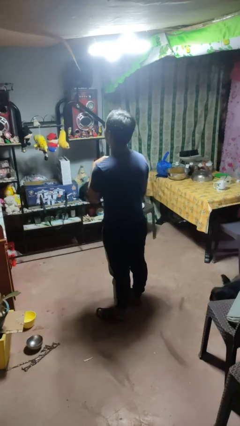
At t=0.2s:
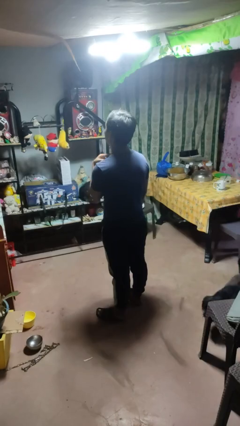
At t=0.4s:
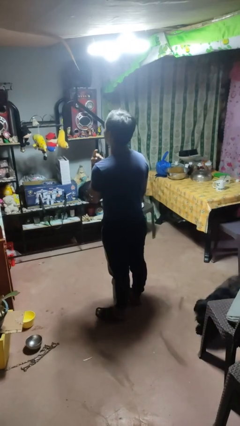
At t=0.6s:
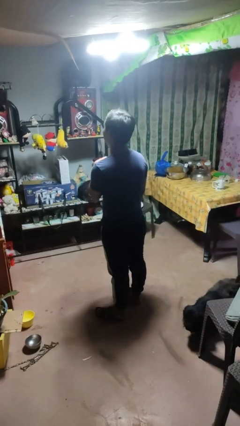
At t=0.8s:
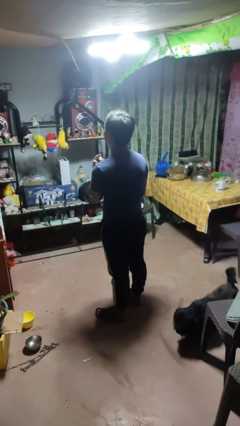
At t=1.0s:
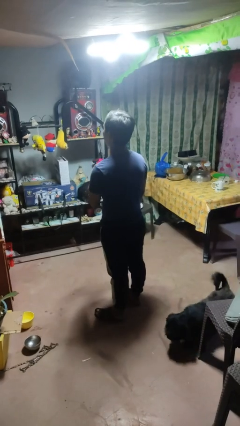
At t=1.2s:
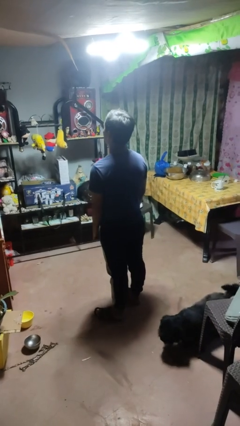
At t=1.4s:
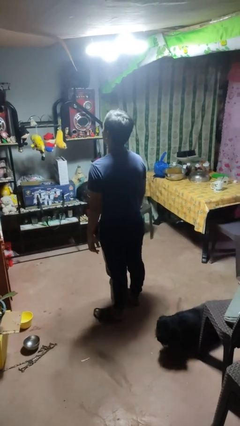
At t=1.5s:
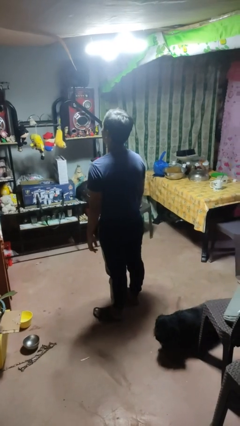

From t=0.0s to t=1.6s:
person gestures cut

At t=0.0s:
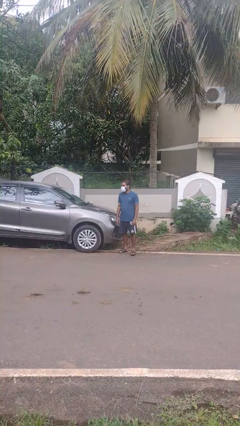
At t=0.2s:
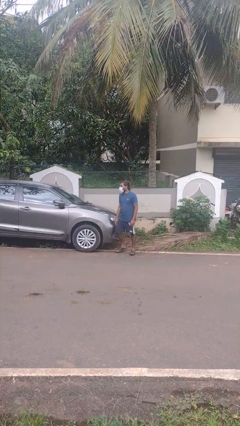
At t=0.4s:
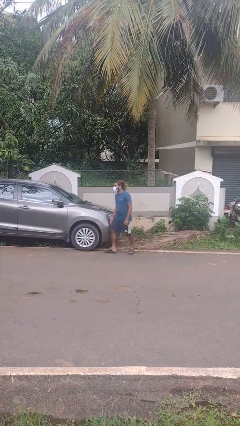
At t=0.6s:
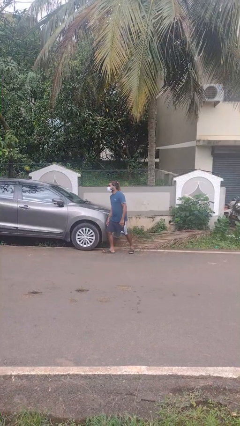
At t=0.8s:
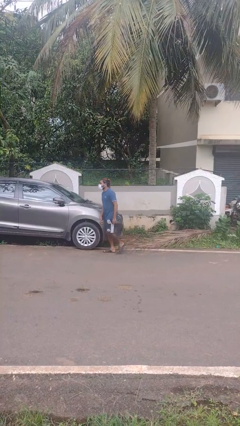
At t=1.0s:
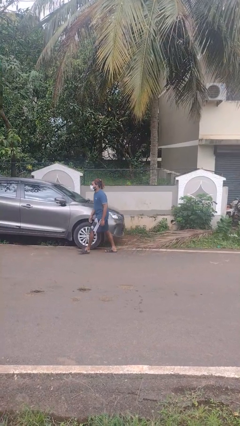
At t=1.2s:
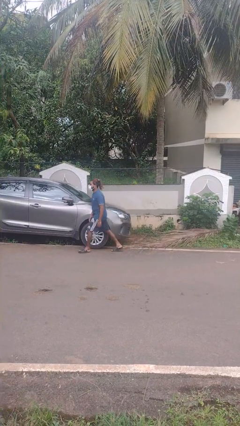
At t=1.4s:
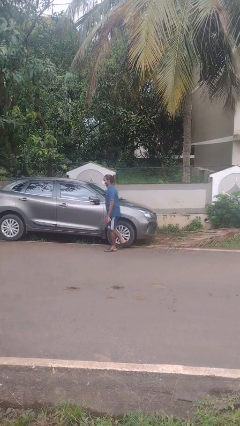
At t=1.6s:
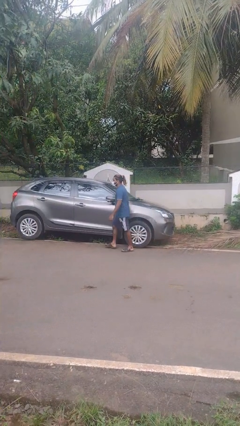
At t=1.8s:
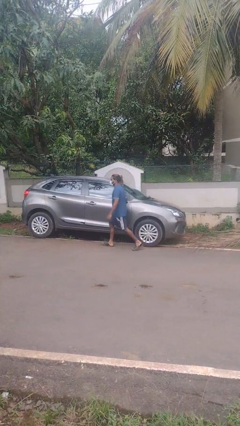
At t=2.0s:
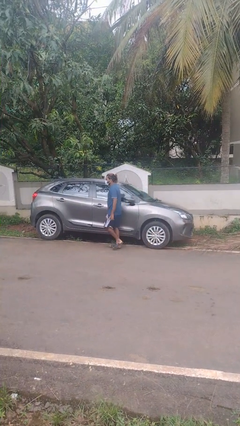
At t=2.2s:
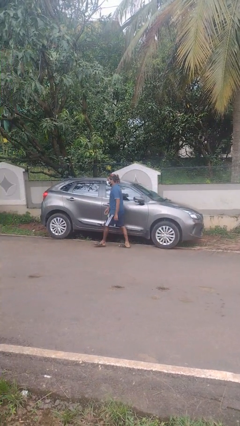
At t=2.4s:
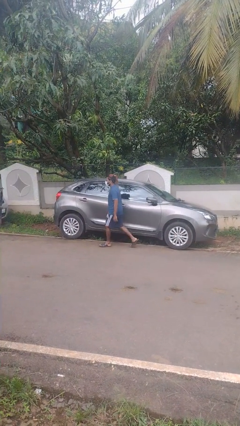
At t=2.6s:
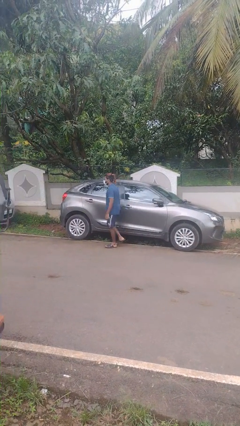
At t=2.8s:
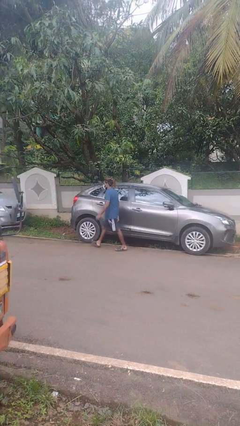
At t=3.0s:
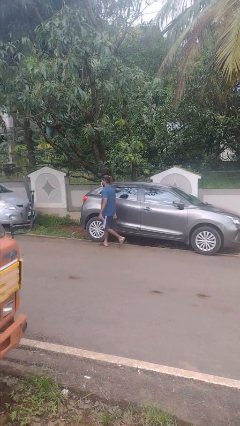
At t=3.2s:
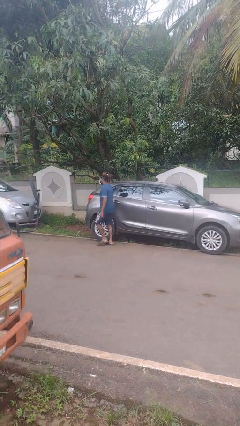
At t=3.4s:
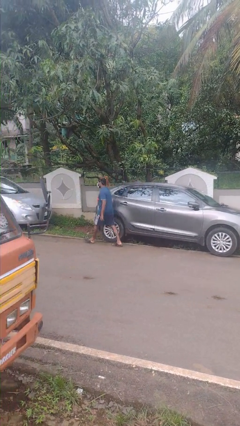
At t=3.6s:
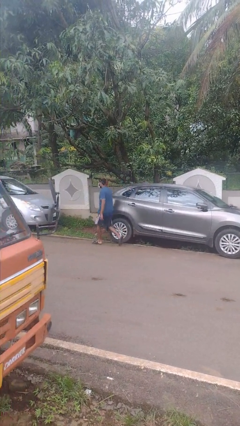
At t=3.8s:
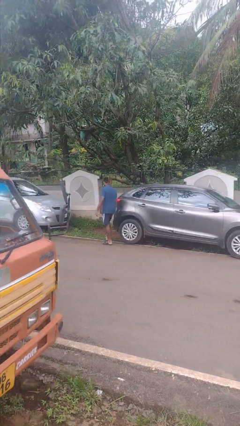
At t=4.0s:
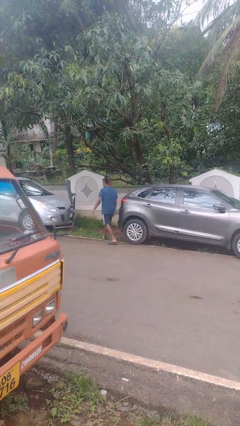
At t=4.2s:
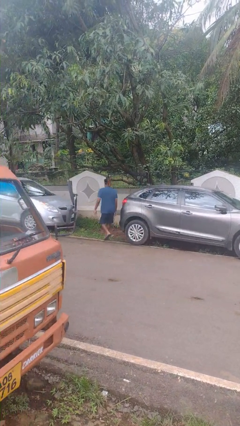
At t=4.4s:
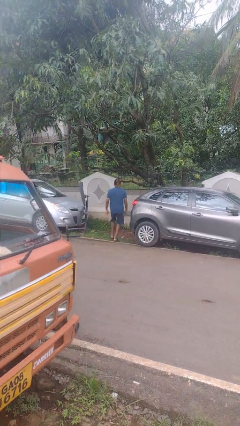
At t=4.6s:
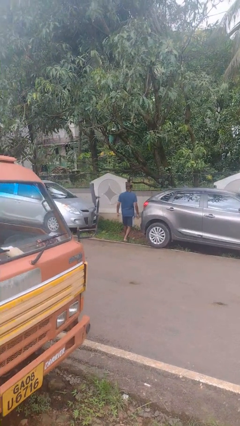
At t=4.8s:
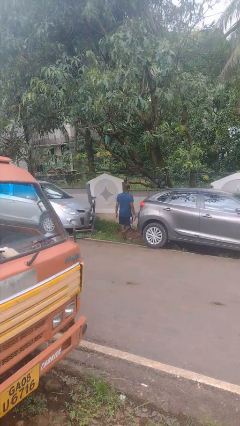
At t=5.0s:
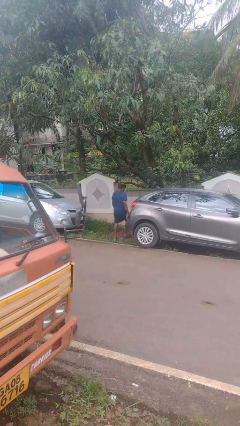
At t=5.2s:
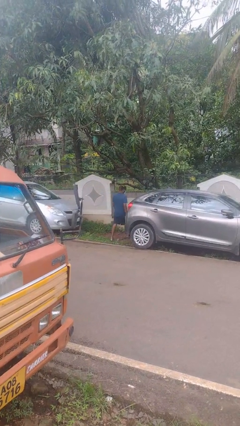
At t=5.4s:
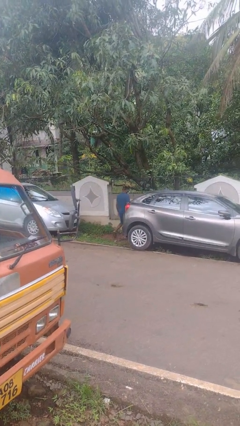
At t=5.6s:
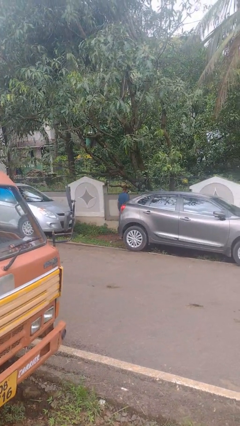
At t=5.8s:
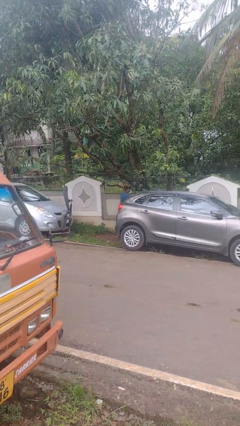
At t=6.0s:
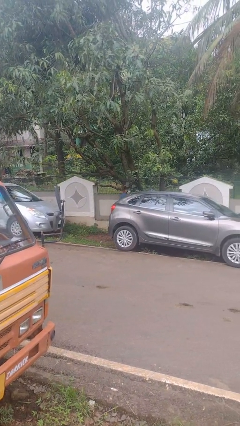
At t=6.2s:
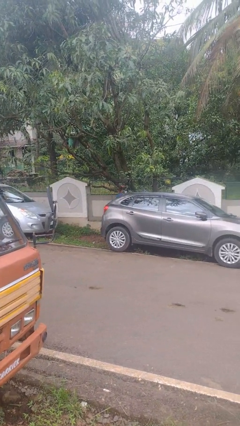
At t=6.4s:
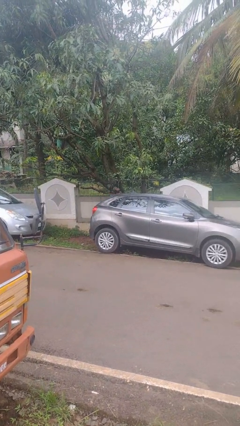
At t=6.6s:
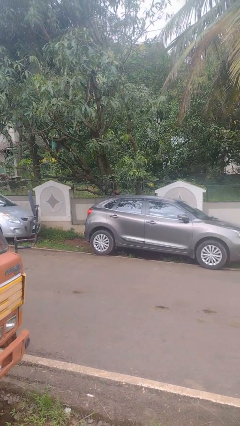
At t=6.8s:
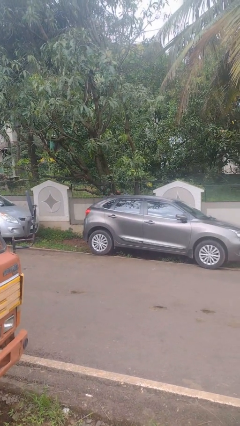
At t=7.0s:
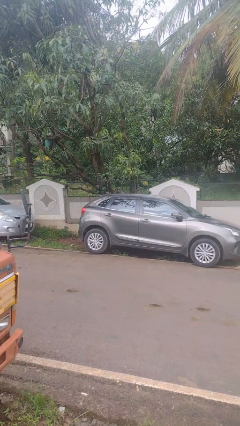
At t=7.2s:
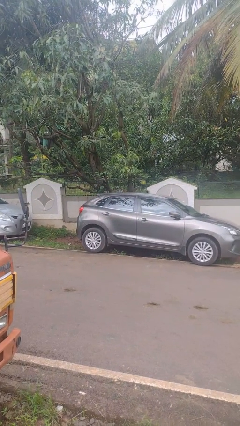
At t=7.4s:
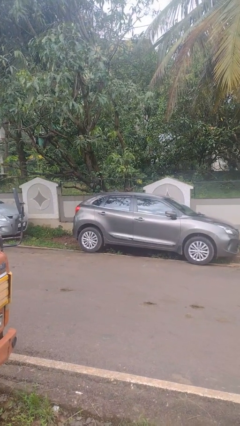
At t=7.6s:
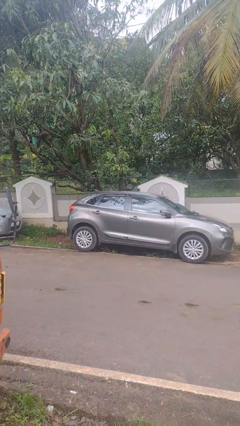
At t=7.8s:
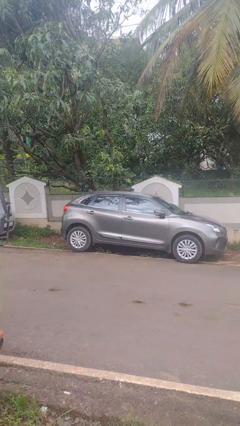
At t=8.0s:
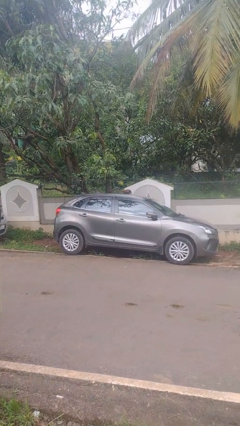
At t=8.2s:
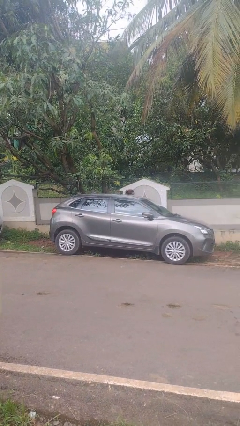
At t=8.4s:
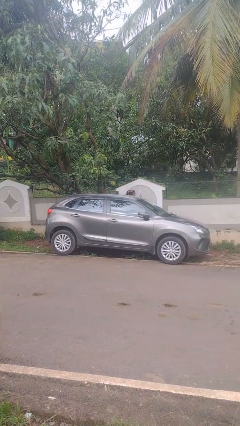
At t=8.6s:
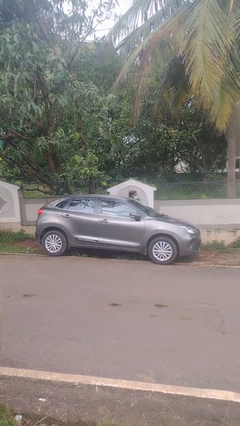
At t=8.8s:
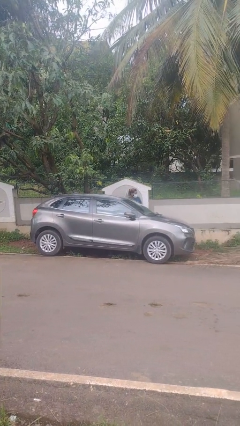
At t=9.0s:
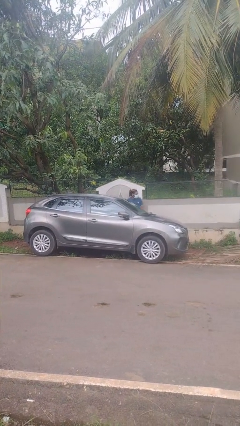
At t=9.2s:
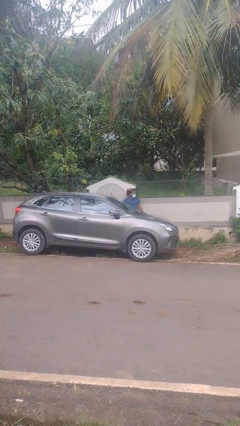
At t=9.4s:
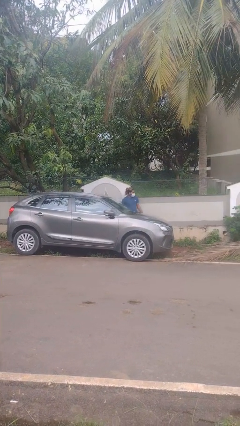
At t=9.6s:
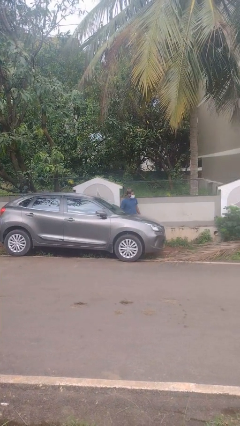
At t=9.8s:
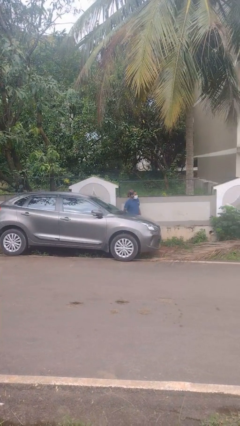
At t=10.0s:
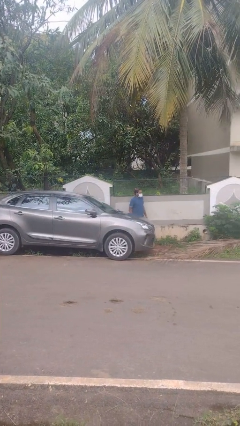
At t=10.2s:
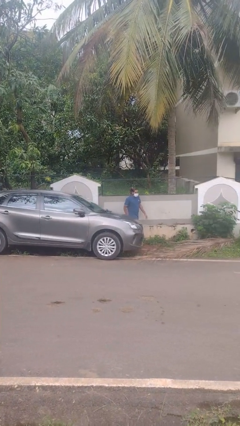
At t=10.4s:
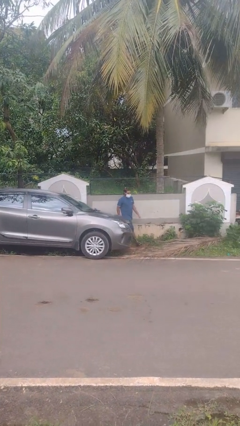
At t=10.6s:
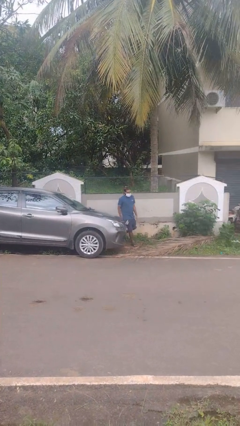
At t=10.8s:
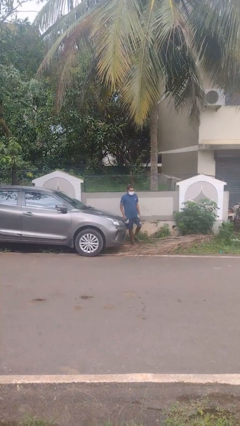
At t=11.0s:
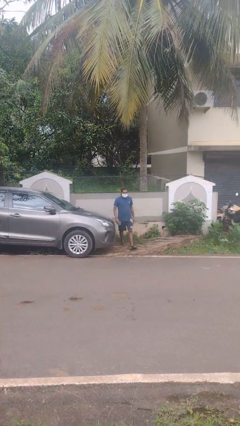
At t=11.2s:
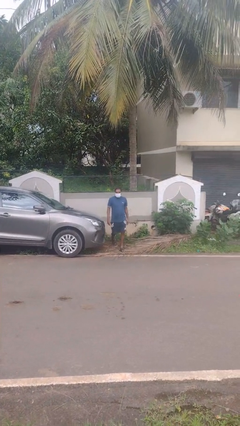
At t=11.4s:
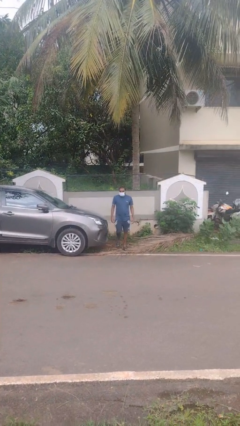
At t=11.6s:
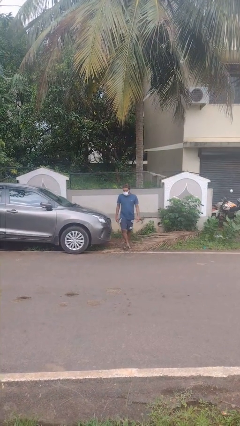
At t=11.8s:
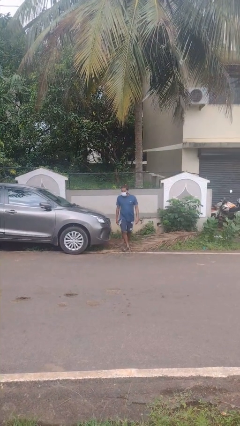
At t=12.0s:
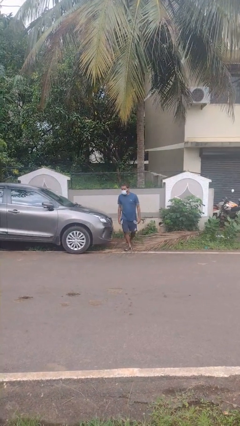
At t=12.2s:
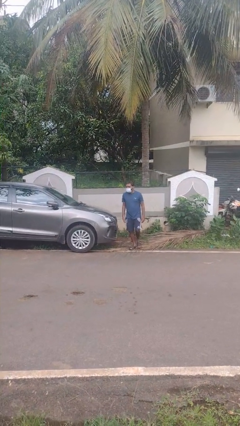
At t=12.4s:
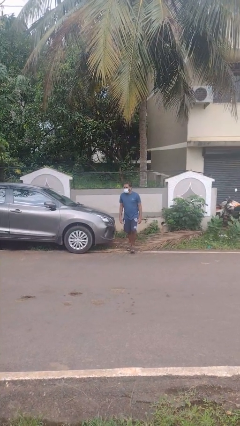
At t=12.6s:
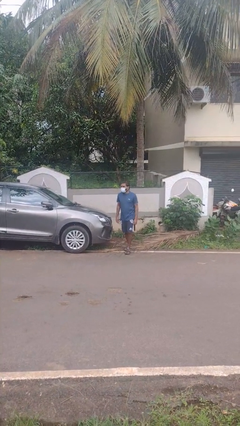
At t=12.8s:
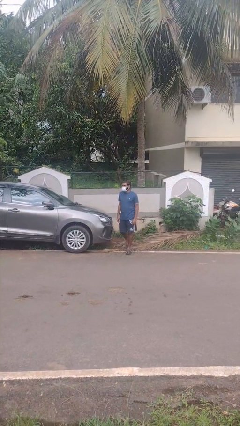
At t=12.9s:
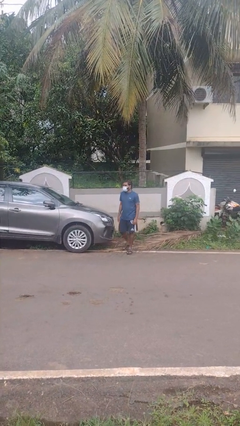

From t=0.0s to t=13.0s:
person walks around car

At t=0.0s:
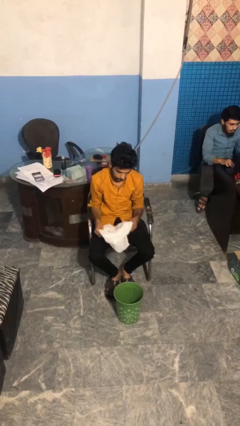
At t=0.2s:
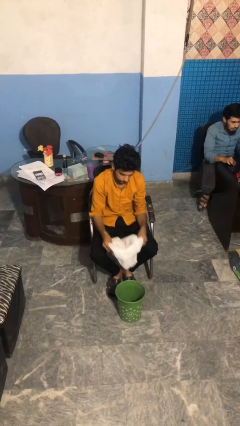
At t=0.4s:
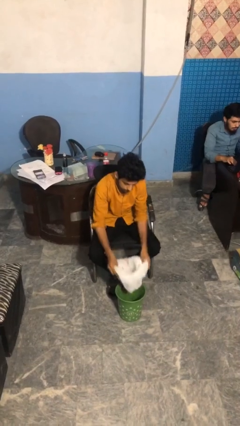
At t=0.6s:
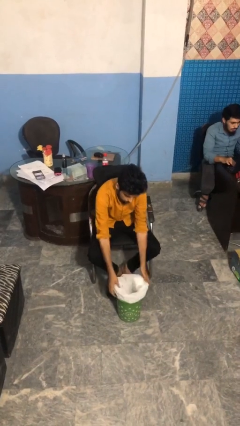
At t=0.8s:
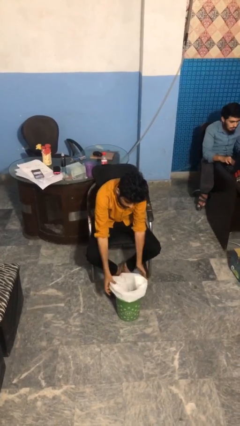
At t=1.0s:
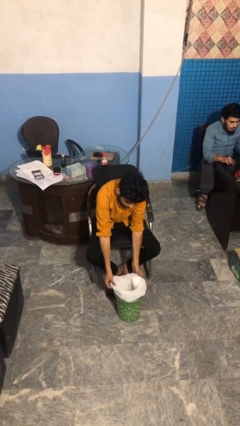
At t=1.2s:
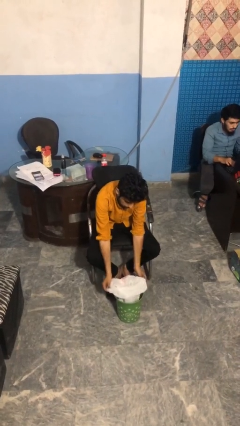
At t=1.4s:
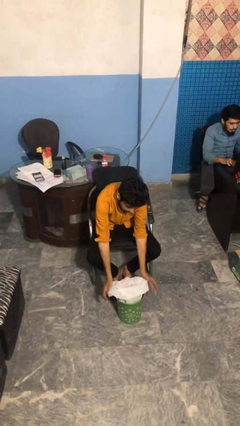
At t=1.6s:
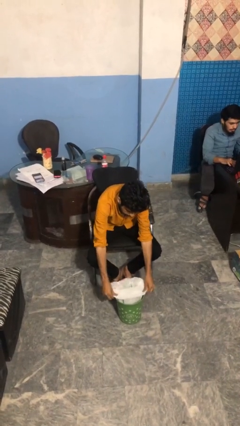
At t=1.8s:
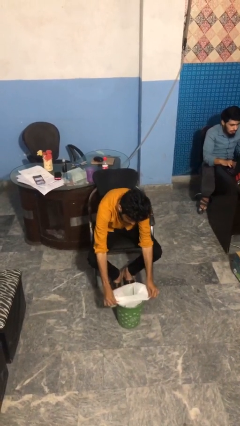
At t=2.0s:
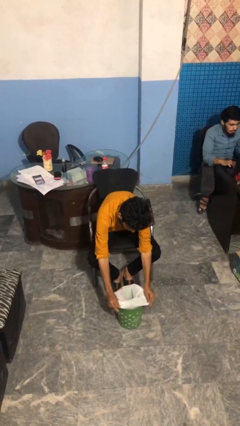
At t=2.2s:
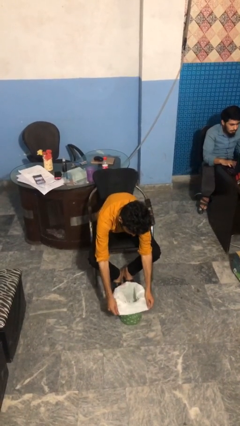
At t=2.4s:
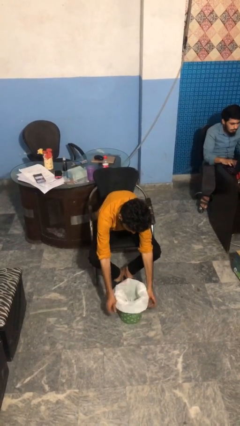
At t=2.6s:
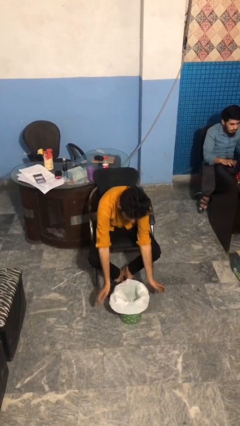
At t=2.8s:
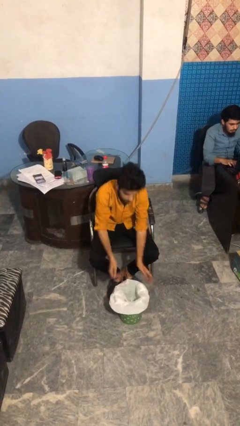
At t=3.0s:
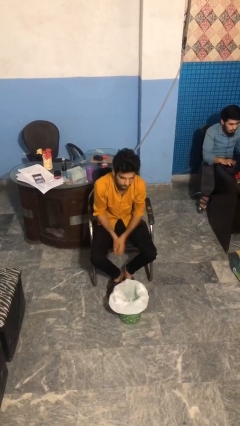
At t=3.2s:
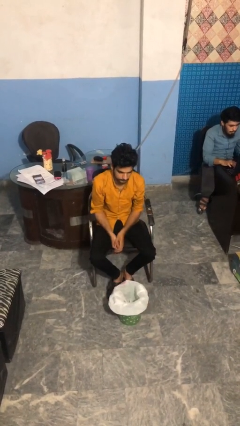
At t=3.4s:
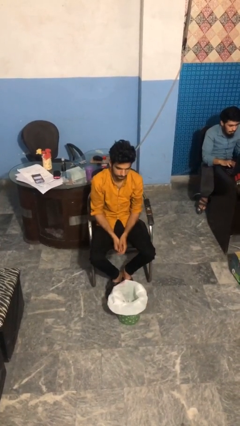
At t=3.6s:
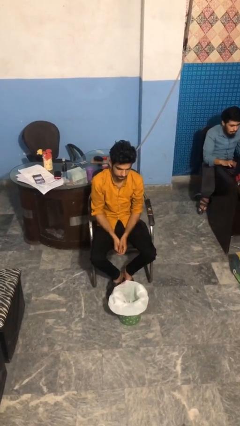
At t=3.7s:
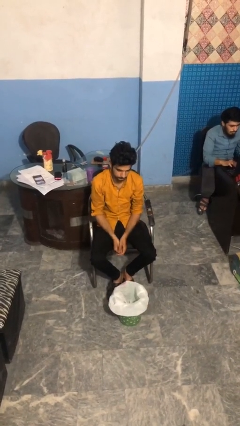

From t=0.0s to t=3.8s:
person inserts trashbag into trashcan
